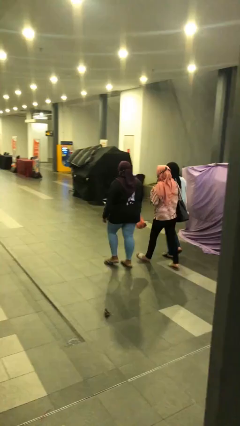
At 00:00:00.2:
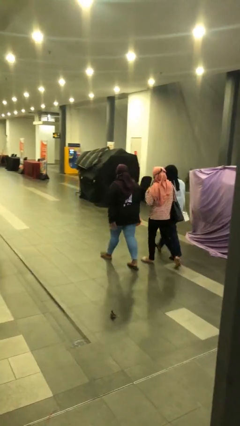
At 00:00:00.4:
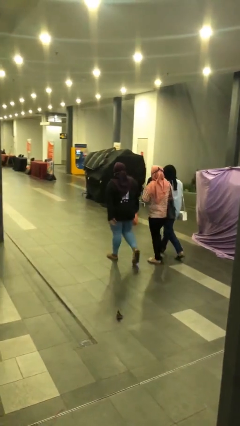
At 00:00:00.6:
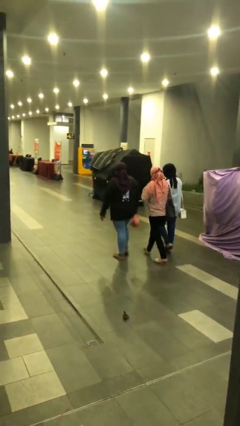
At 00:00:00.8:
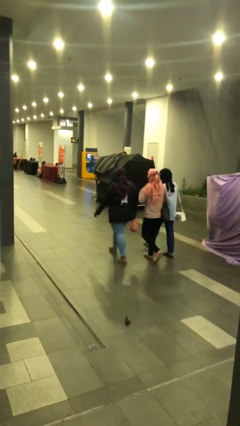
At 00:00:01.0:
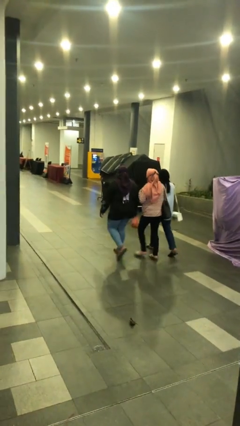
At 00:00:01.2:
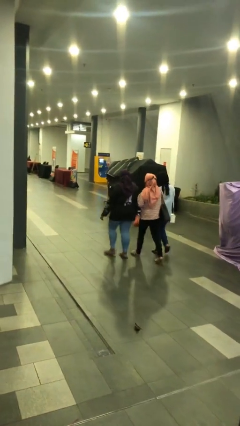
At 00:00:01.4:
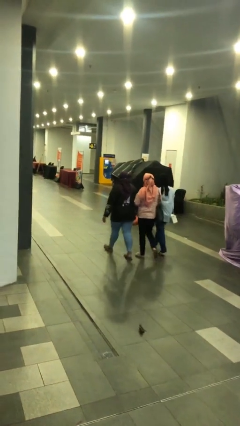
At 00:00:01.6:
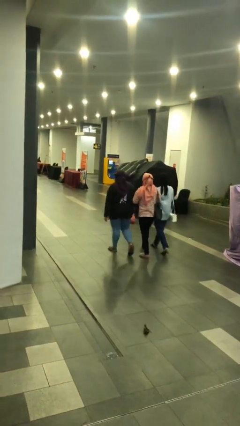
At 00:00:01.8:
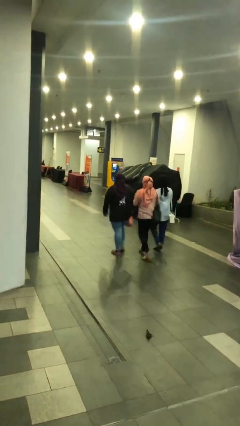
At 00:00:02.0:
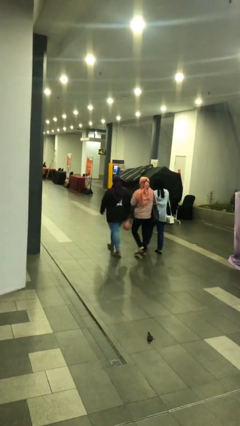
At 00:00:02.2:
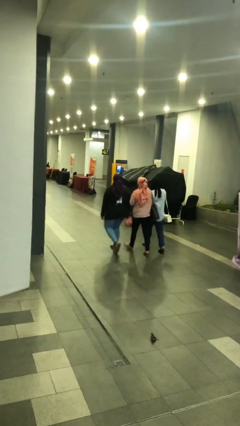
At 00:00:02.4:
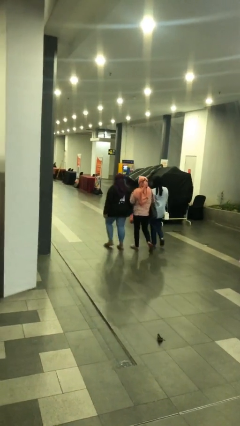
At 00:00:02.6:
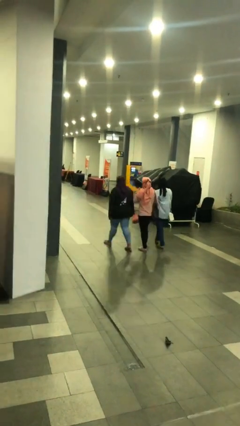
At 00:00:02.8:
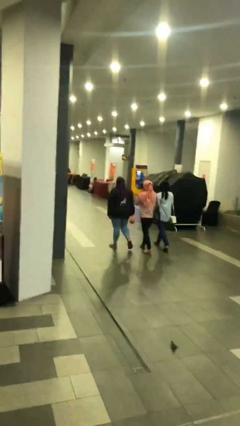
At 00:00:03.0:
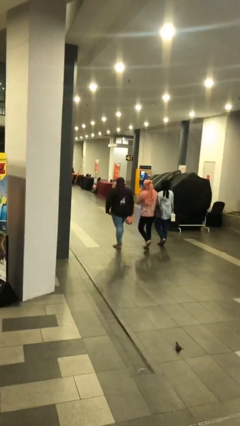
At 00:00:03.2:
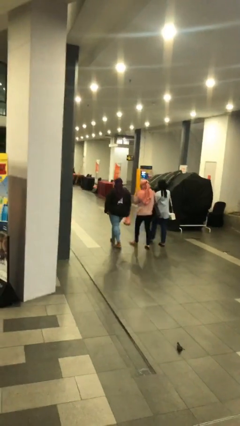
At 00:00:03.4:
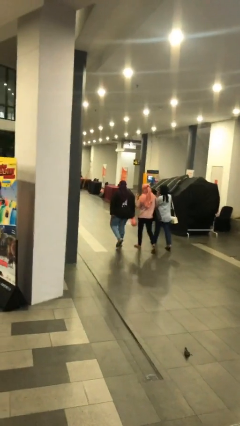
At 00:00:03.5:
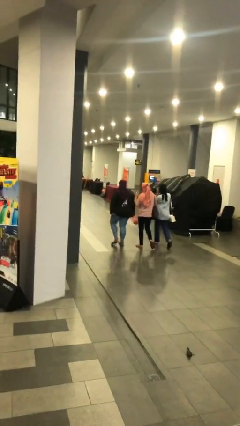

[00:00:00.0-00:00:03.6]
person holds hand

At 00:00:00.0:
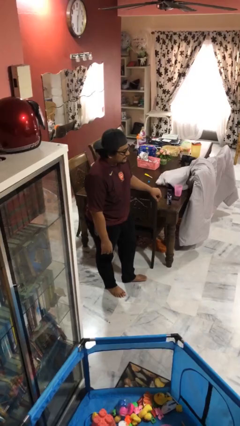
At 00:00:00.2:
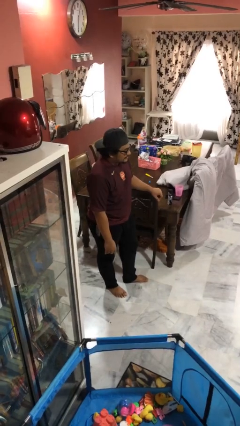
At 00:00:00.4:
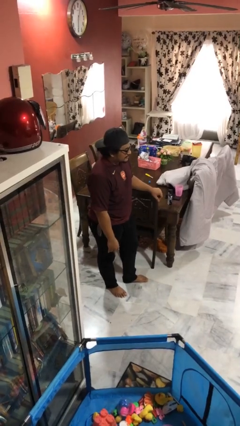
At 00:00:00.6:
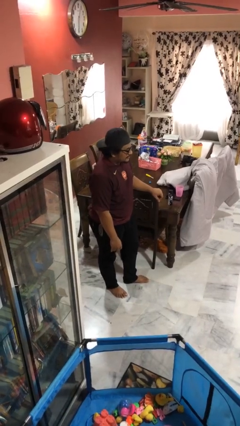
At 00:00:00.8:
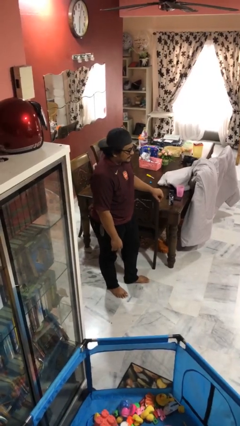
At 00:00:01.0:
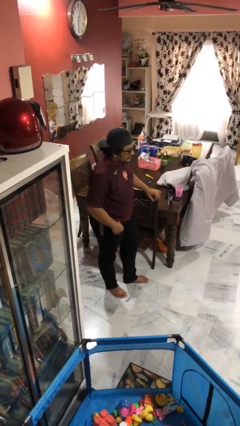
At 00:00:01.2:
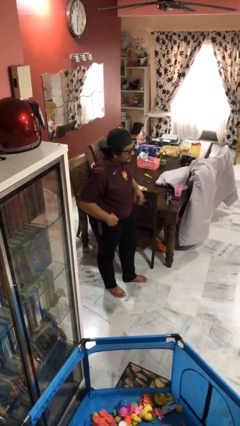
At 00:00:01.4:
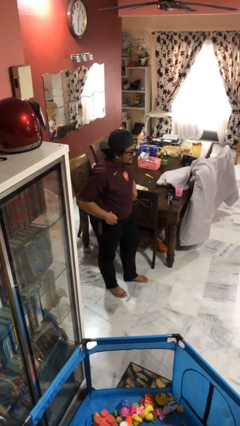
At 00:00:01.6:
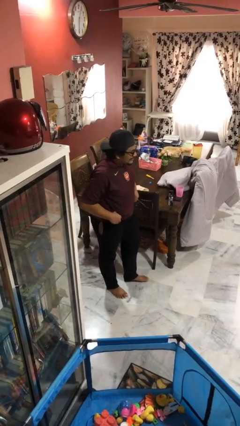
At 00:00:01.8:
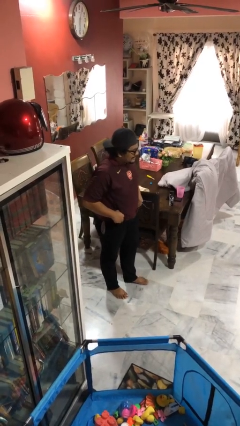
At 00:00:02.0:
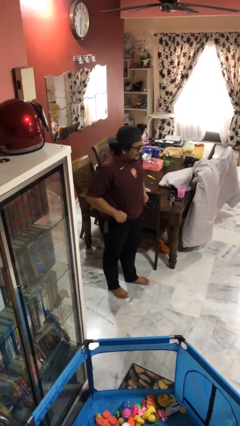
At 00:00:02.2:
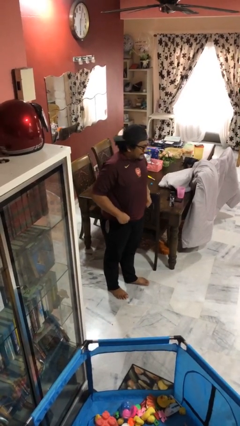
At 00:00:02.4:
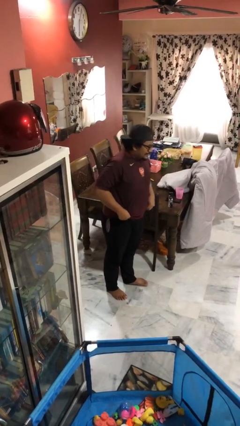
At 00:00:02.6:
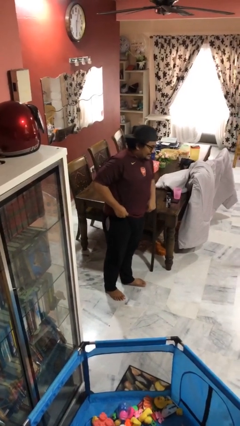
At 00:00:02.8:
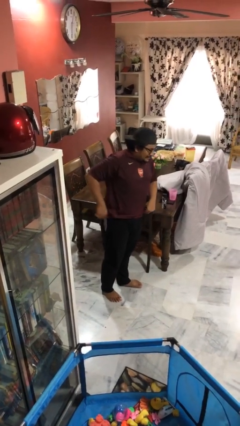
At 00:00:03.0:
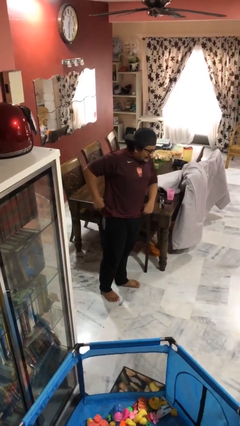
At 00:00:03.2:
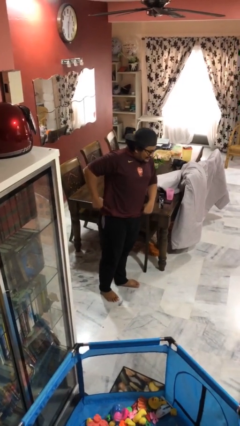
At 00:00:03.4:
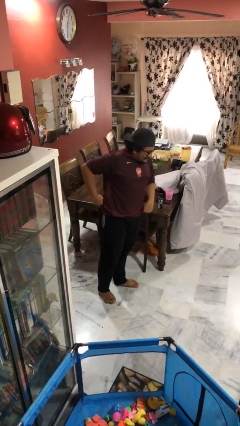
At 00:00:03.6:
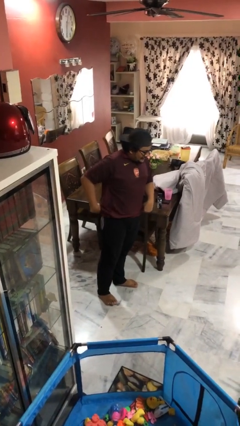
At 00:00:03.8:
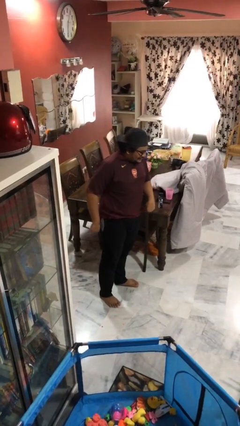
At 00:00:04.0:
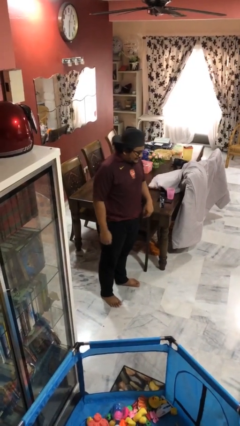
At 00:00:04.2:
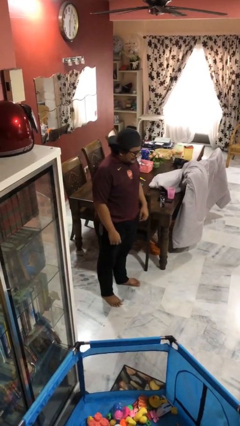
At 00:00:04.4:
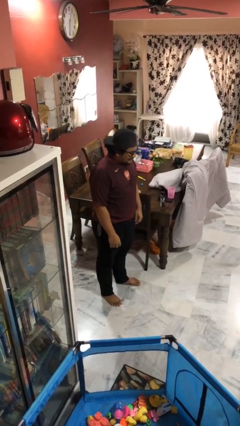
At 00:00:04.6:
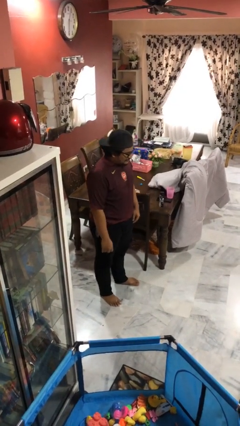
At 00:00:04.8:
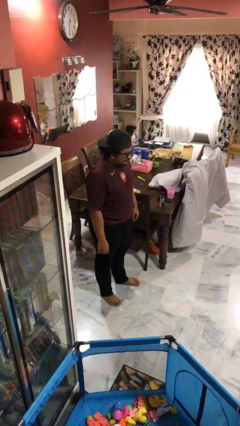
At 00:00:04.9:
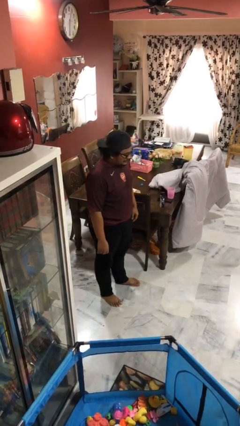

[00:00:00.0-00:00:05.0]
person hikes up pants

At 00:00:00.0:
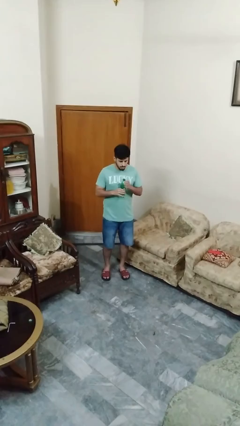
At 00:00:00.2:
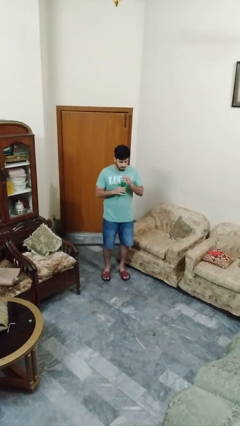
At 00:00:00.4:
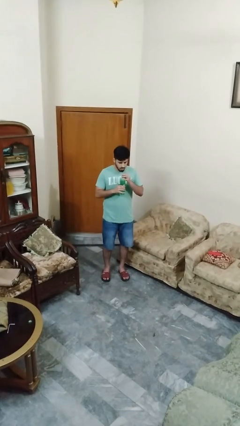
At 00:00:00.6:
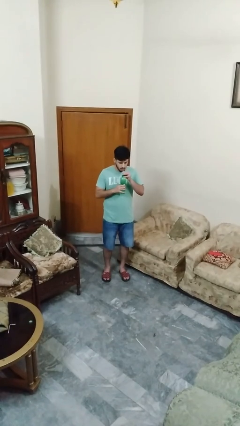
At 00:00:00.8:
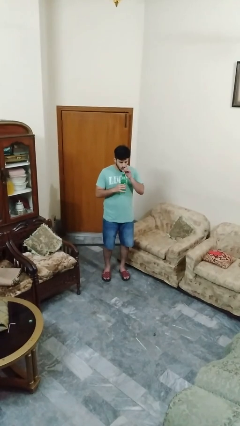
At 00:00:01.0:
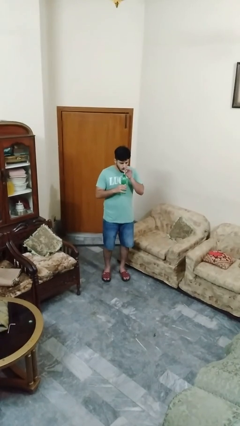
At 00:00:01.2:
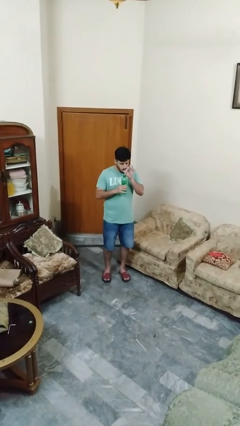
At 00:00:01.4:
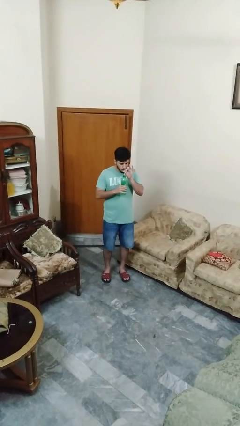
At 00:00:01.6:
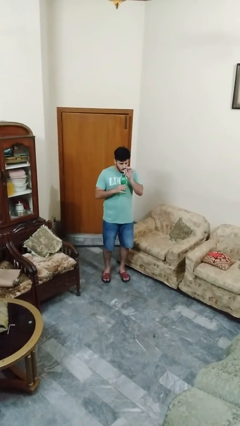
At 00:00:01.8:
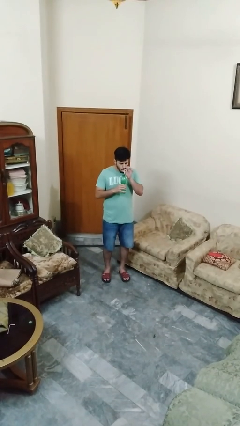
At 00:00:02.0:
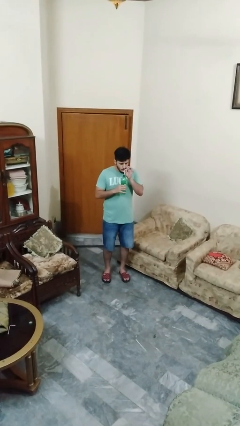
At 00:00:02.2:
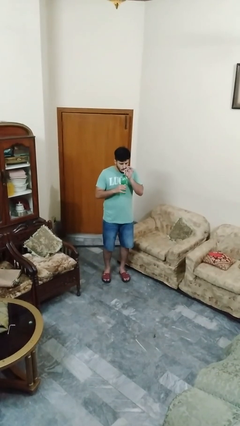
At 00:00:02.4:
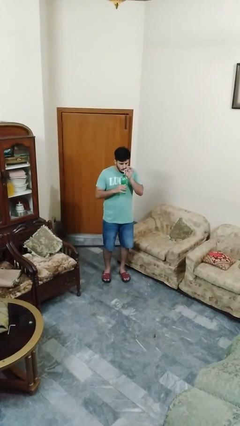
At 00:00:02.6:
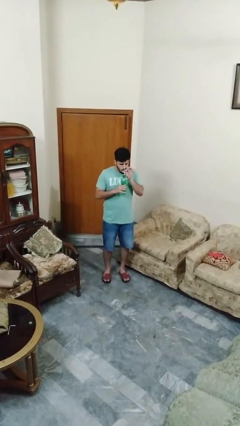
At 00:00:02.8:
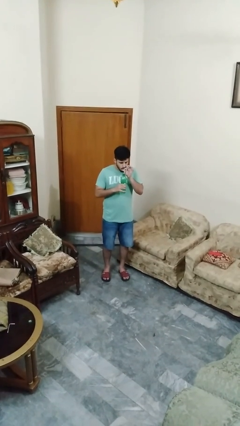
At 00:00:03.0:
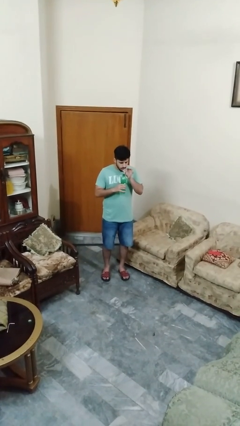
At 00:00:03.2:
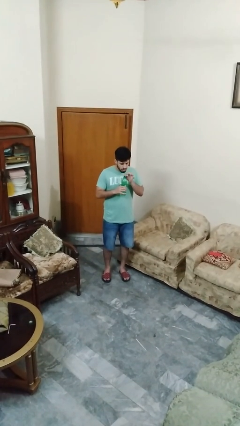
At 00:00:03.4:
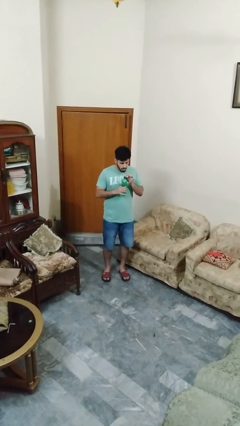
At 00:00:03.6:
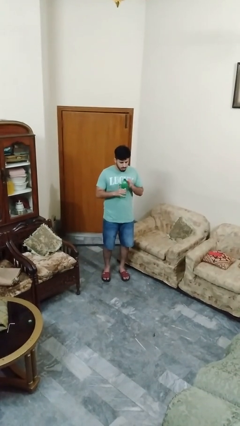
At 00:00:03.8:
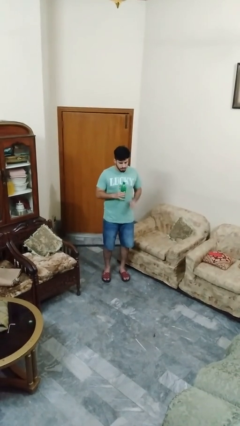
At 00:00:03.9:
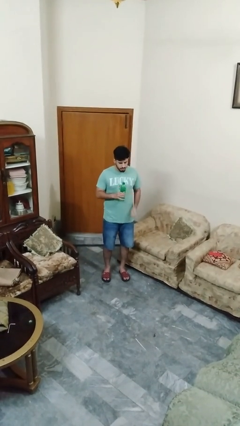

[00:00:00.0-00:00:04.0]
person drinks from straw

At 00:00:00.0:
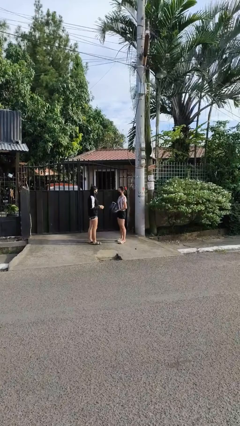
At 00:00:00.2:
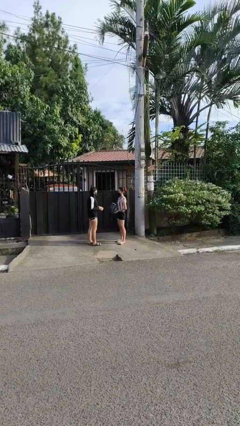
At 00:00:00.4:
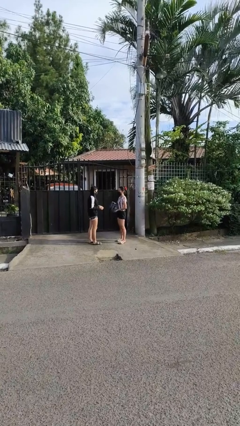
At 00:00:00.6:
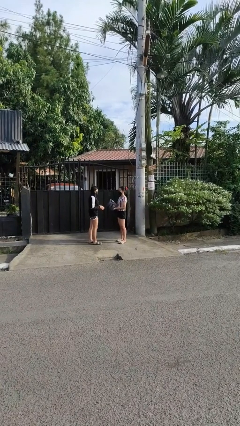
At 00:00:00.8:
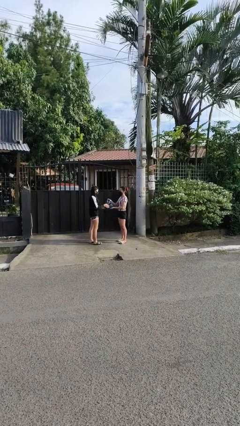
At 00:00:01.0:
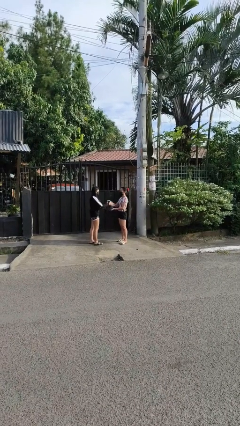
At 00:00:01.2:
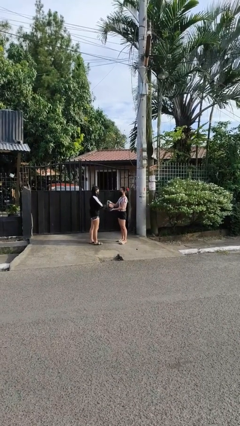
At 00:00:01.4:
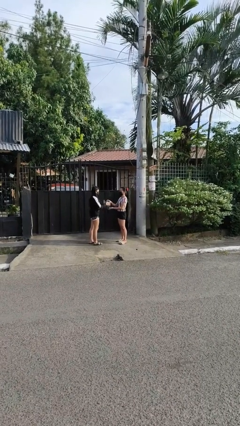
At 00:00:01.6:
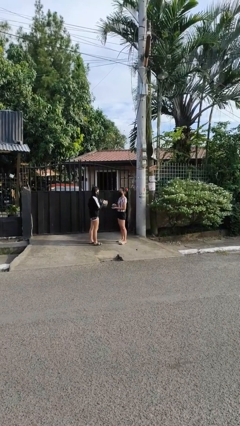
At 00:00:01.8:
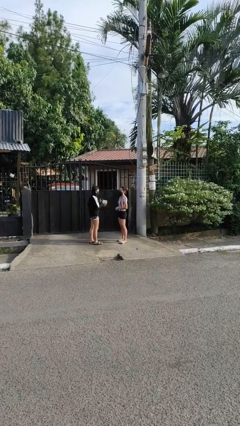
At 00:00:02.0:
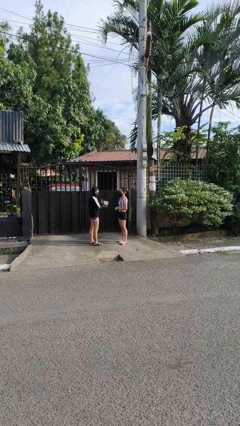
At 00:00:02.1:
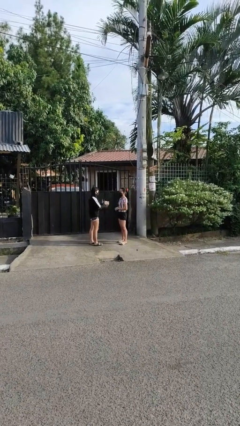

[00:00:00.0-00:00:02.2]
person transfers object to person

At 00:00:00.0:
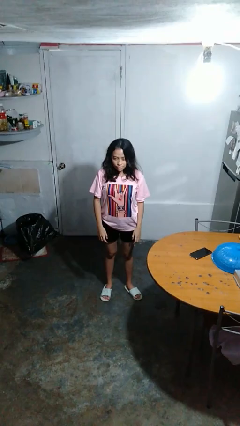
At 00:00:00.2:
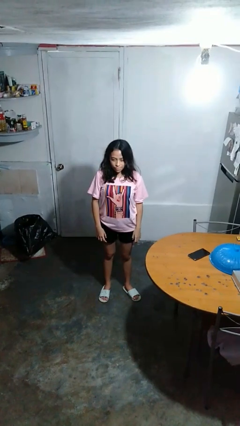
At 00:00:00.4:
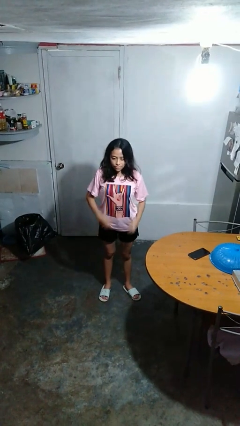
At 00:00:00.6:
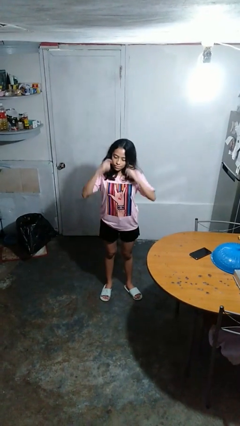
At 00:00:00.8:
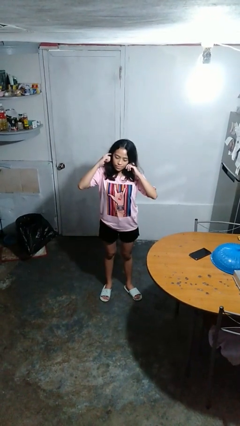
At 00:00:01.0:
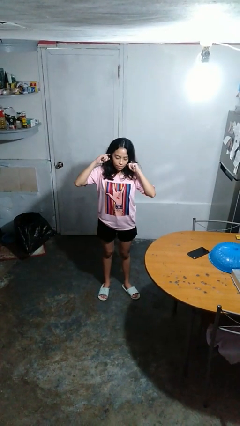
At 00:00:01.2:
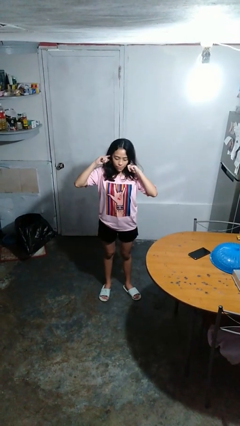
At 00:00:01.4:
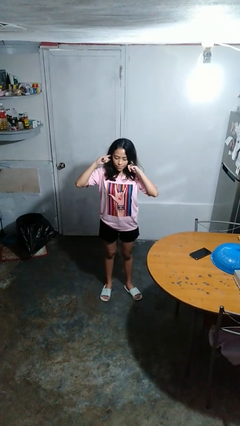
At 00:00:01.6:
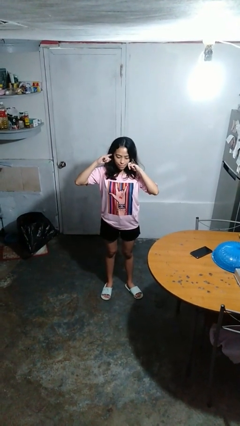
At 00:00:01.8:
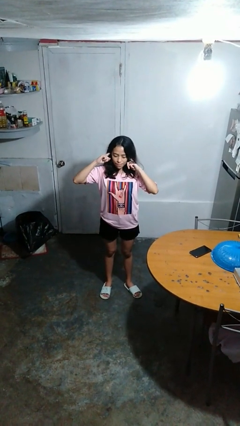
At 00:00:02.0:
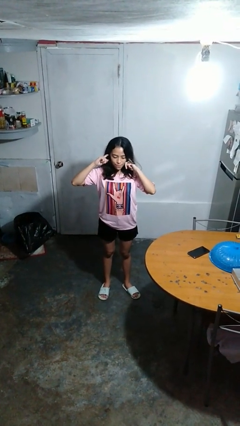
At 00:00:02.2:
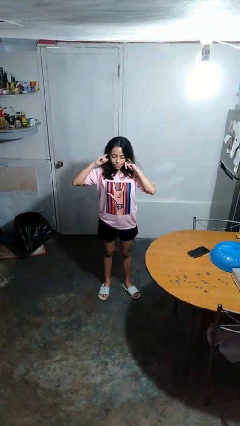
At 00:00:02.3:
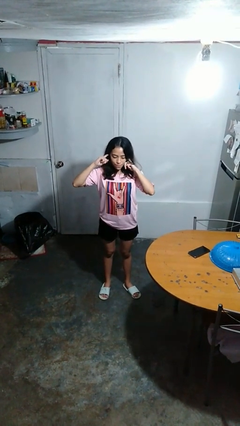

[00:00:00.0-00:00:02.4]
person puts fingers in ear
